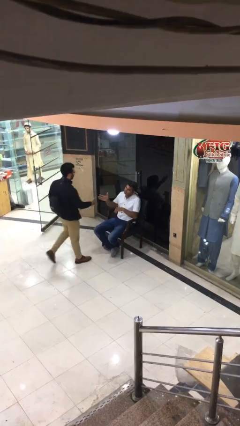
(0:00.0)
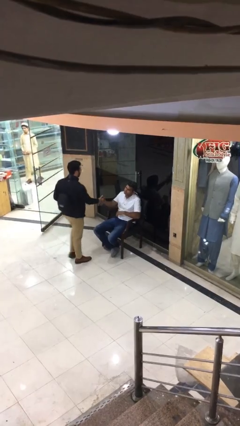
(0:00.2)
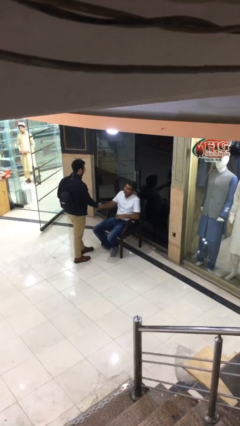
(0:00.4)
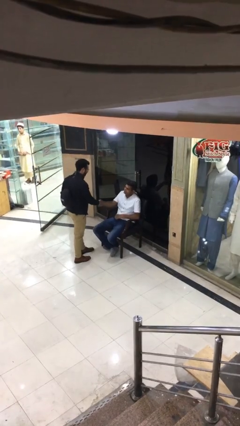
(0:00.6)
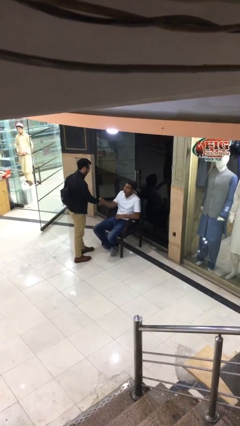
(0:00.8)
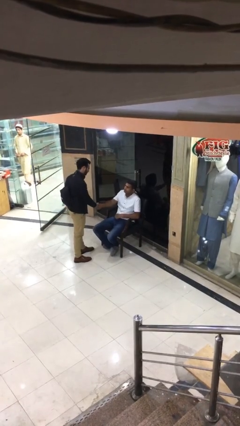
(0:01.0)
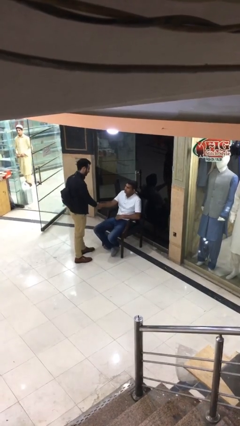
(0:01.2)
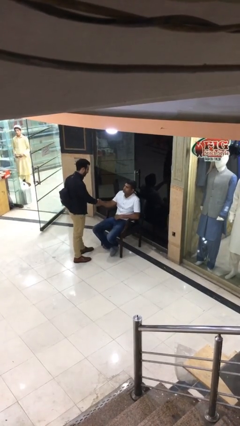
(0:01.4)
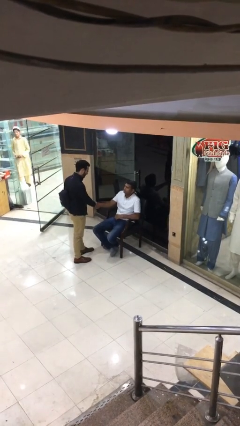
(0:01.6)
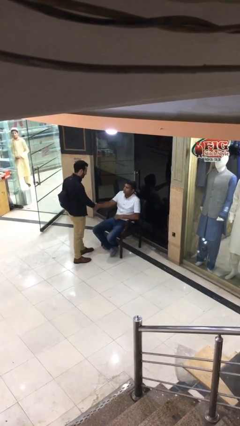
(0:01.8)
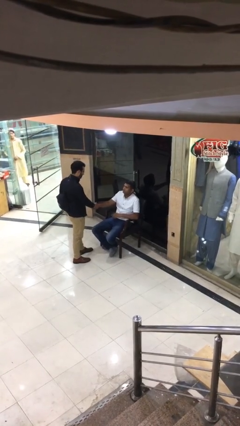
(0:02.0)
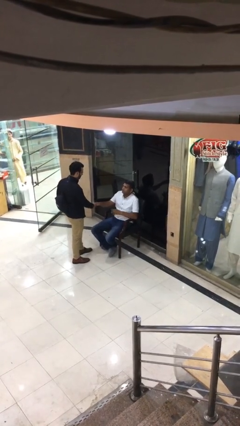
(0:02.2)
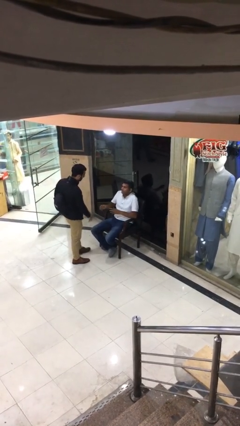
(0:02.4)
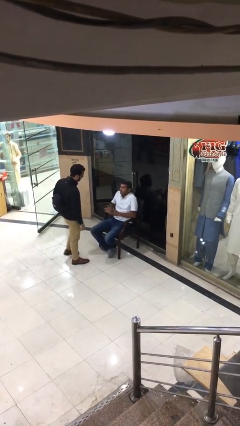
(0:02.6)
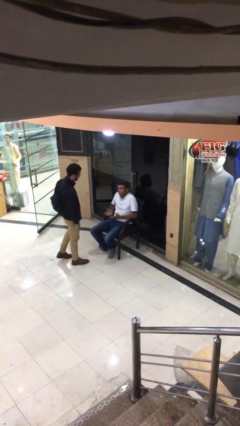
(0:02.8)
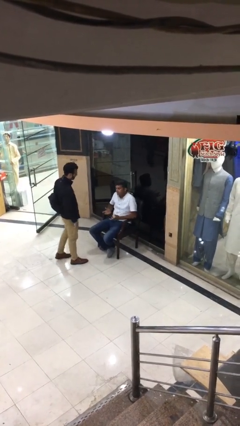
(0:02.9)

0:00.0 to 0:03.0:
person shakes hand

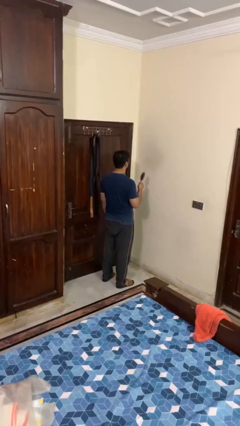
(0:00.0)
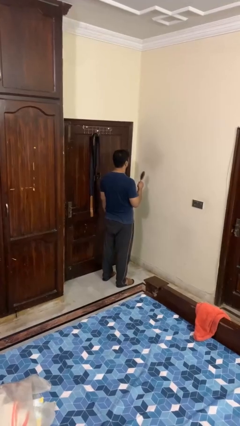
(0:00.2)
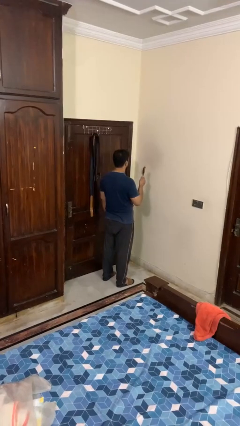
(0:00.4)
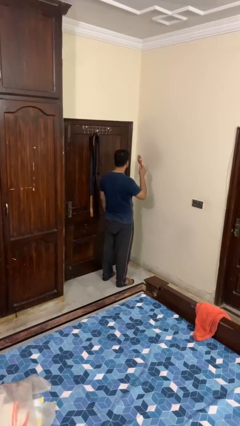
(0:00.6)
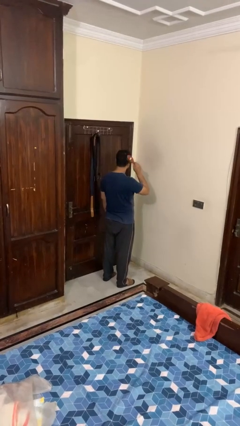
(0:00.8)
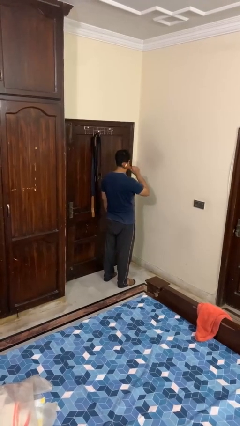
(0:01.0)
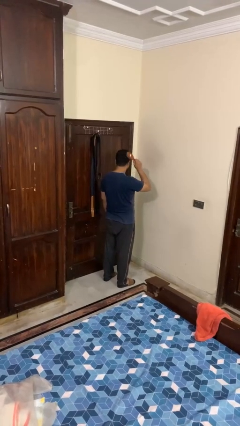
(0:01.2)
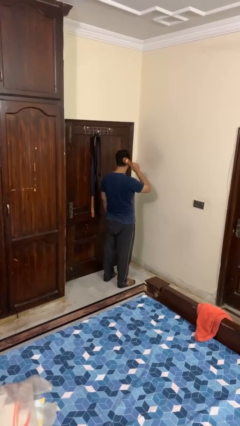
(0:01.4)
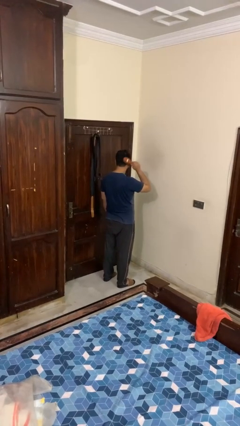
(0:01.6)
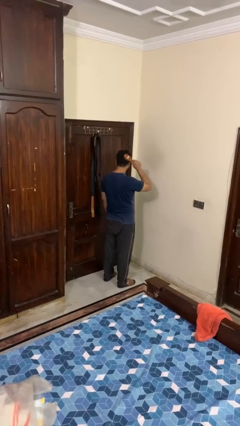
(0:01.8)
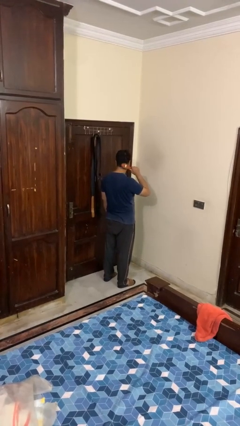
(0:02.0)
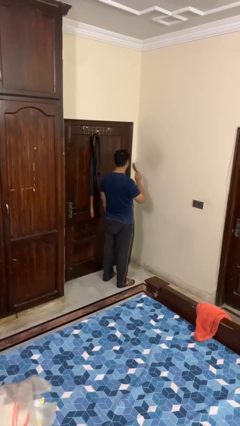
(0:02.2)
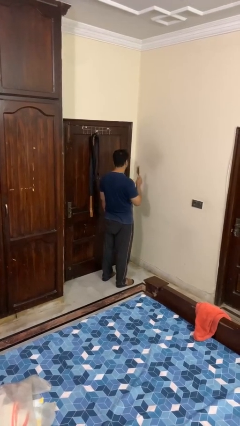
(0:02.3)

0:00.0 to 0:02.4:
person brushes hair

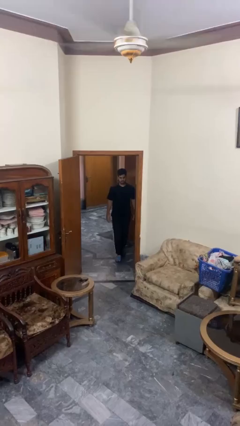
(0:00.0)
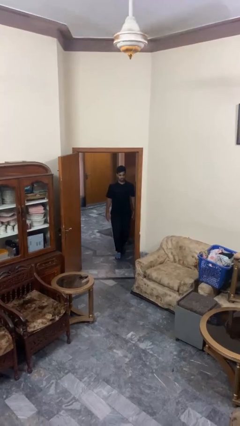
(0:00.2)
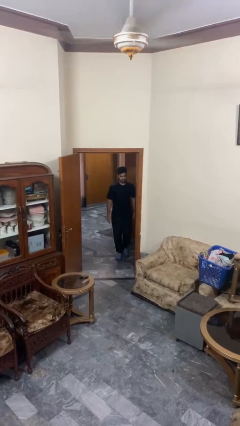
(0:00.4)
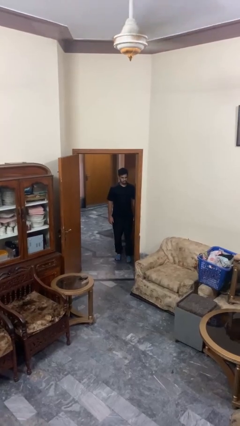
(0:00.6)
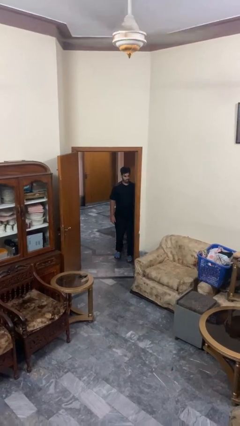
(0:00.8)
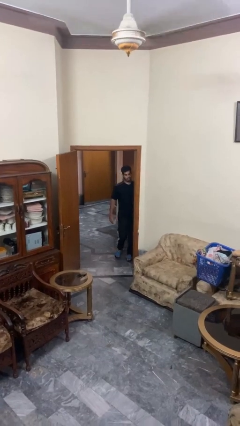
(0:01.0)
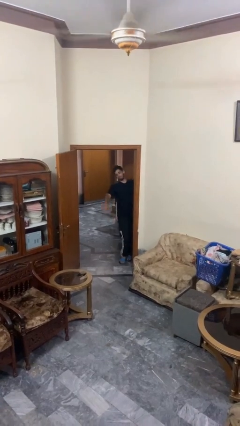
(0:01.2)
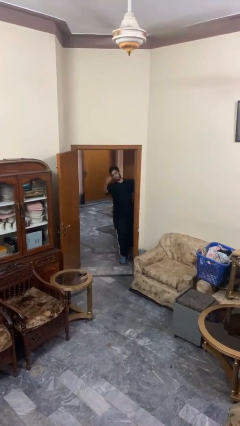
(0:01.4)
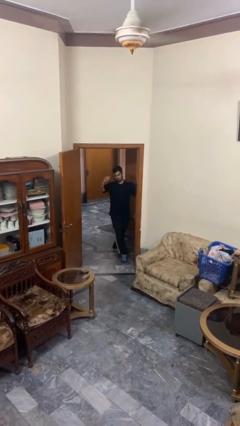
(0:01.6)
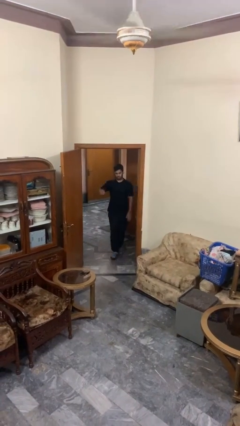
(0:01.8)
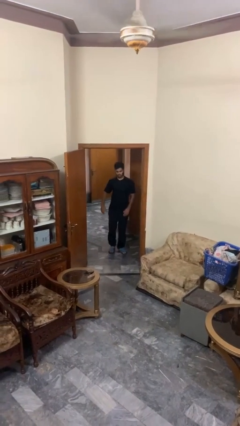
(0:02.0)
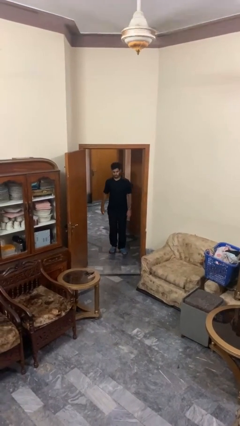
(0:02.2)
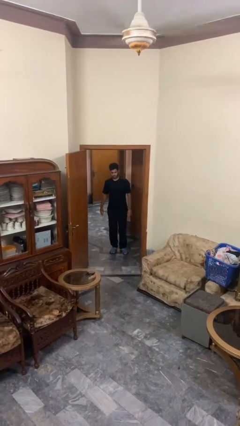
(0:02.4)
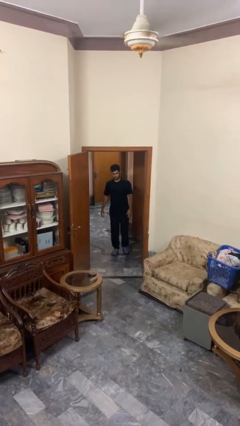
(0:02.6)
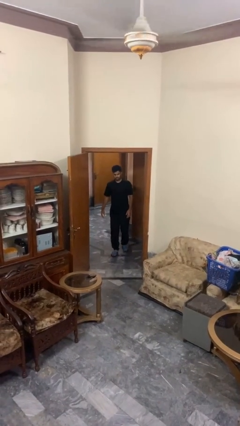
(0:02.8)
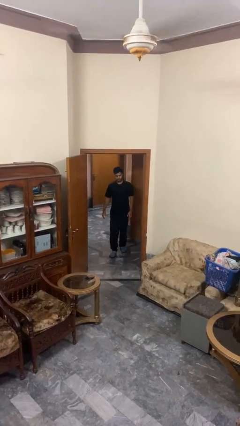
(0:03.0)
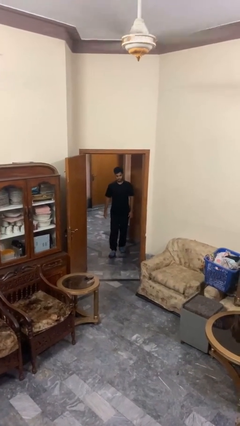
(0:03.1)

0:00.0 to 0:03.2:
person bumps into wall

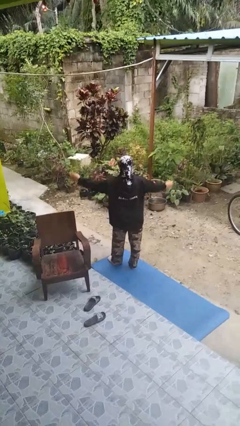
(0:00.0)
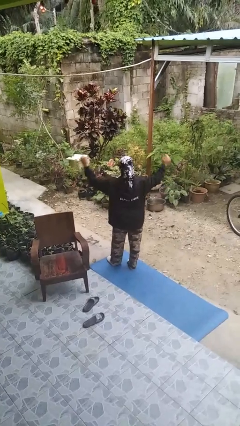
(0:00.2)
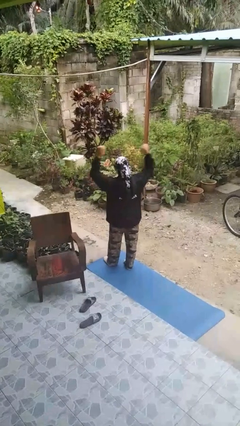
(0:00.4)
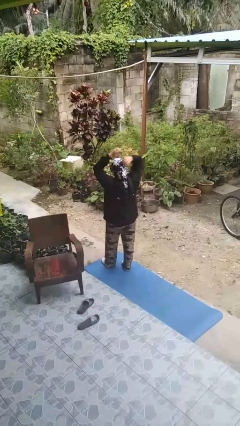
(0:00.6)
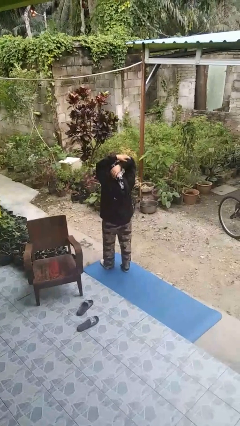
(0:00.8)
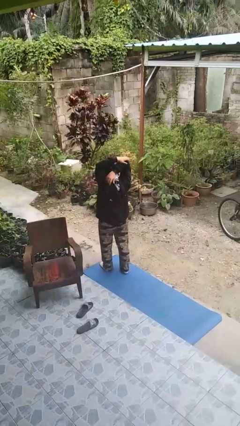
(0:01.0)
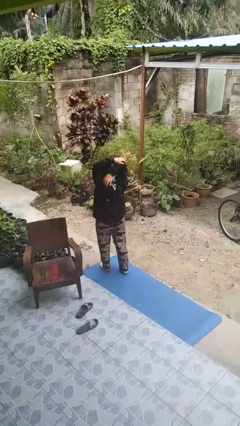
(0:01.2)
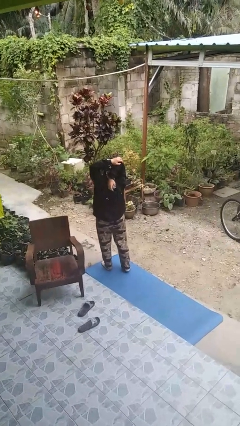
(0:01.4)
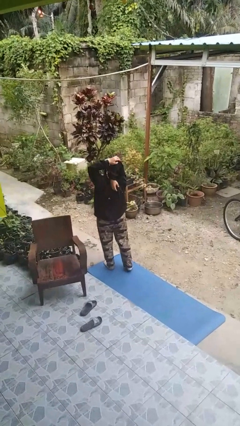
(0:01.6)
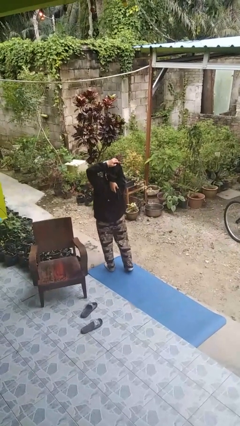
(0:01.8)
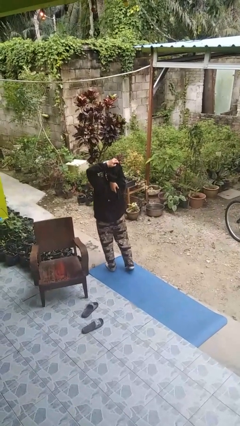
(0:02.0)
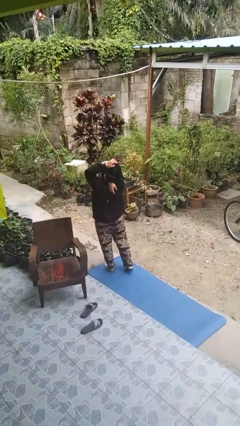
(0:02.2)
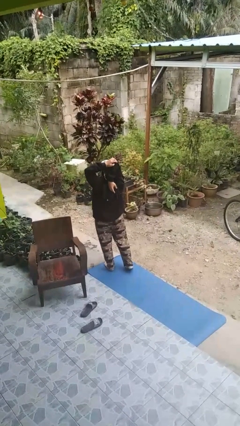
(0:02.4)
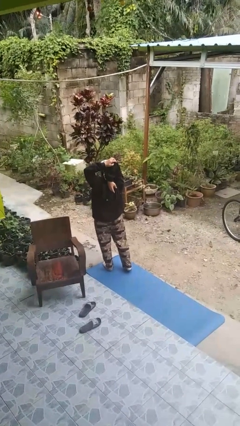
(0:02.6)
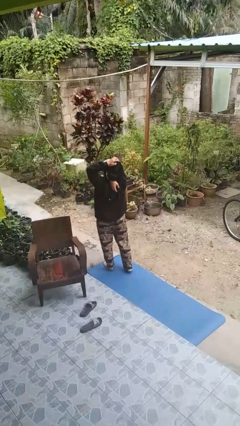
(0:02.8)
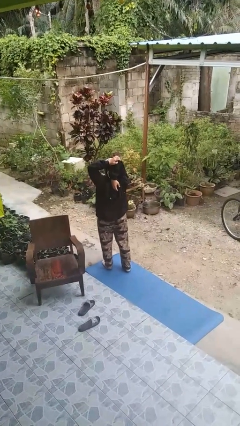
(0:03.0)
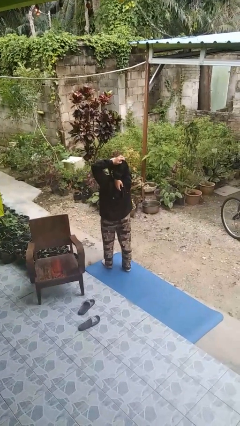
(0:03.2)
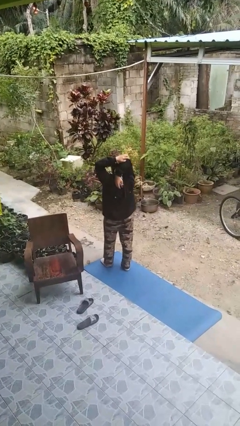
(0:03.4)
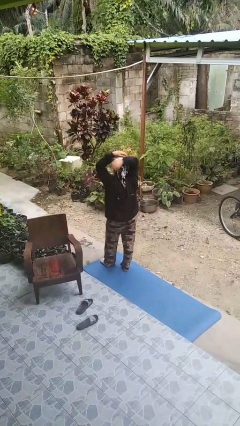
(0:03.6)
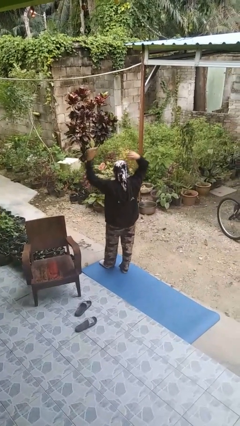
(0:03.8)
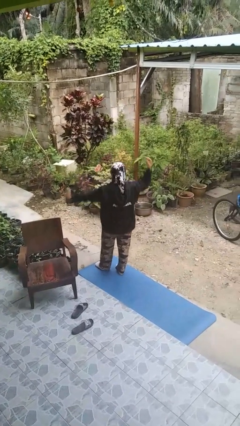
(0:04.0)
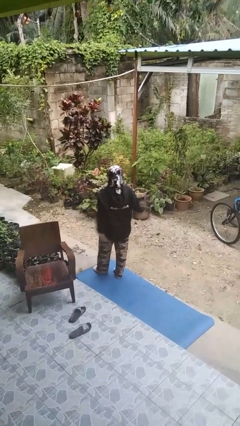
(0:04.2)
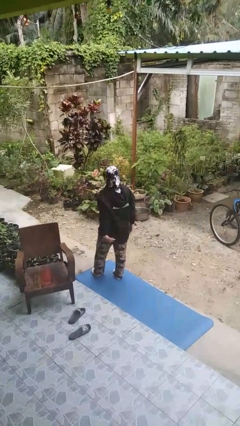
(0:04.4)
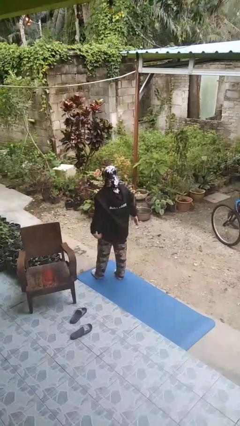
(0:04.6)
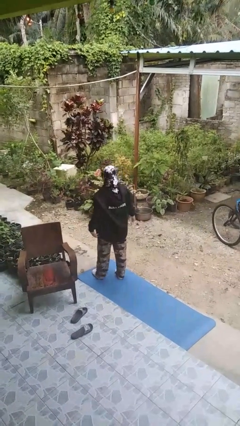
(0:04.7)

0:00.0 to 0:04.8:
person stretches back

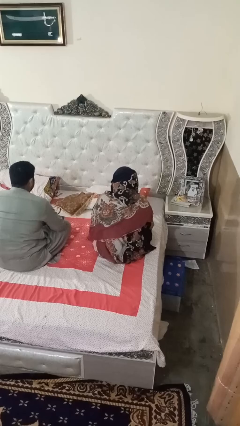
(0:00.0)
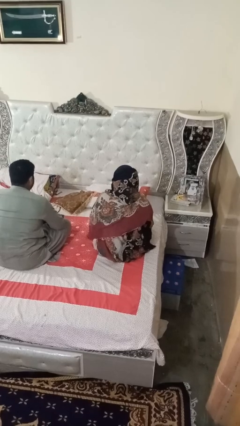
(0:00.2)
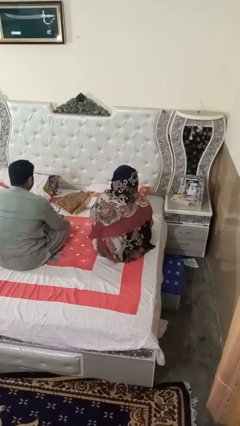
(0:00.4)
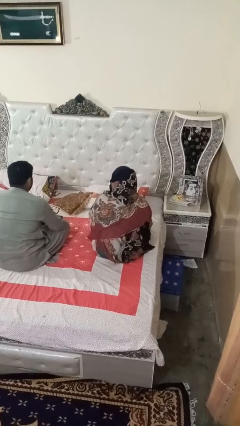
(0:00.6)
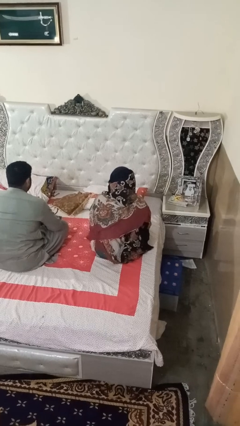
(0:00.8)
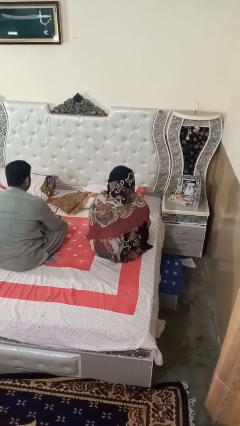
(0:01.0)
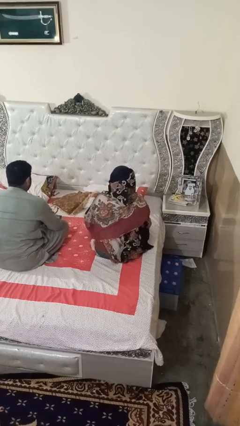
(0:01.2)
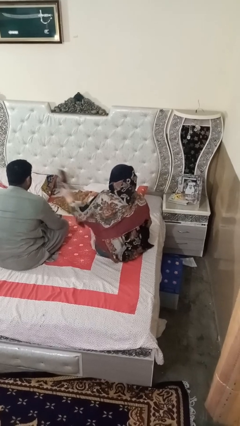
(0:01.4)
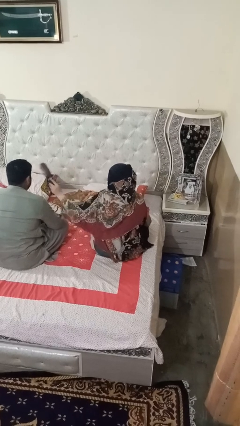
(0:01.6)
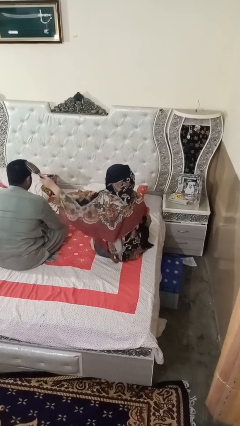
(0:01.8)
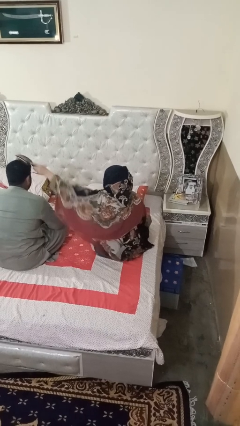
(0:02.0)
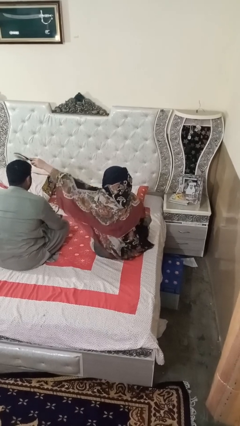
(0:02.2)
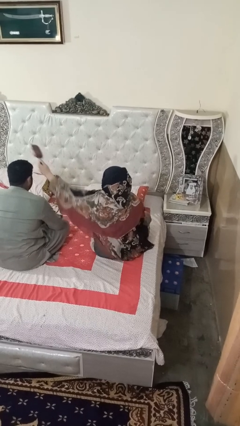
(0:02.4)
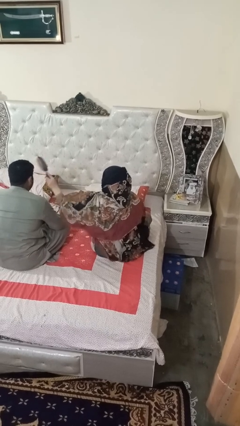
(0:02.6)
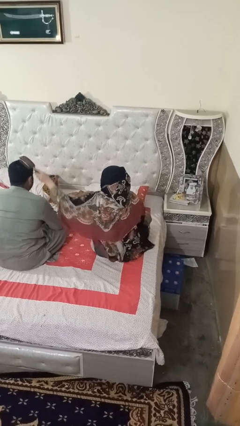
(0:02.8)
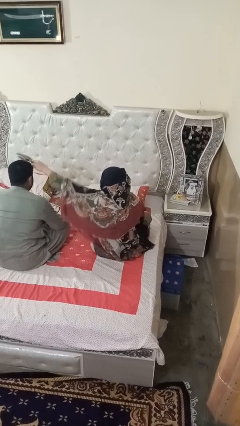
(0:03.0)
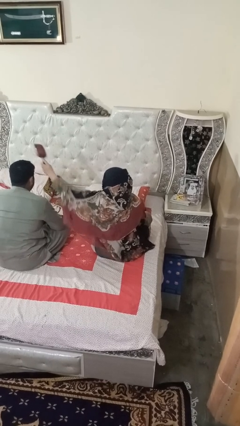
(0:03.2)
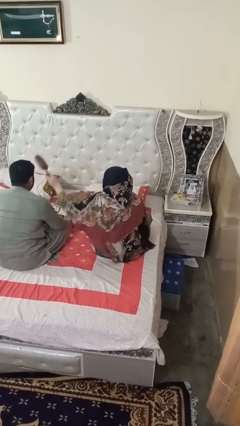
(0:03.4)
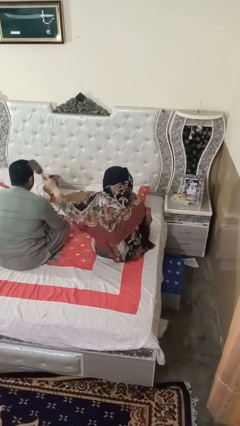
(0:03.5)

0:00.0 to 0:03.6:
person brushes hair of person

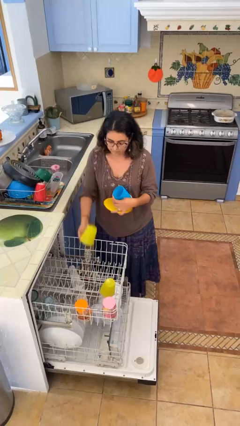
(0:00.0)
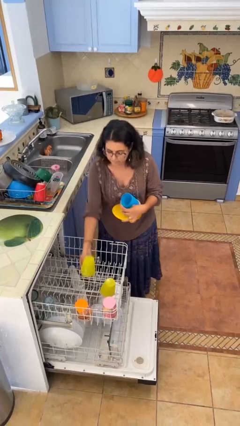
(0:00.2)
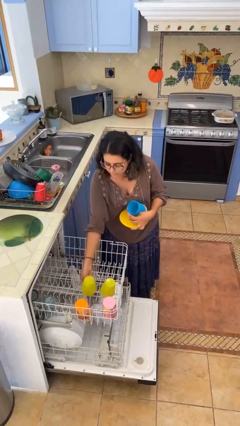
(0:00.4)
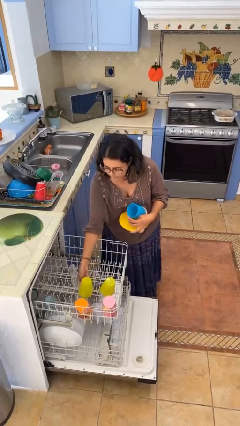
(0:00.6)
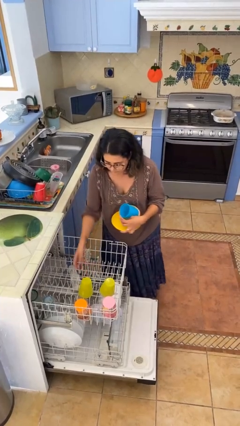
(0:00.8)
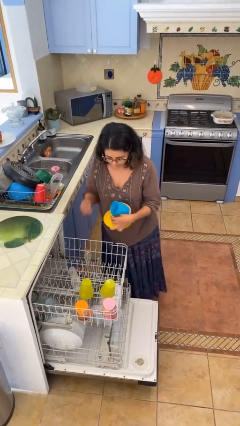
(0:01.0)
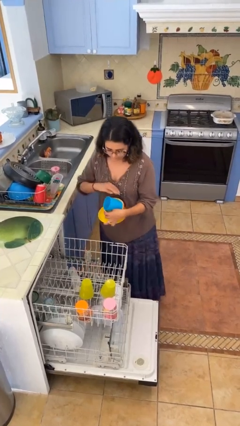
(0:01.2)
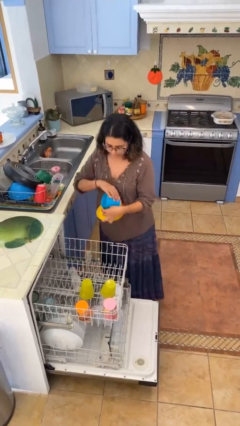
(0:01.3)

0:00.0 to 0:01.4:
person loads dishwasher
